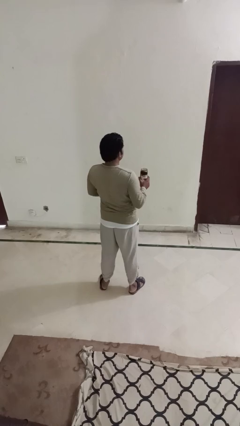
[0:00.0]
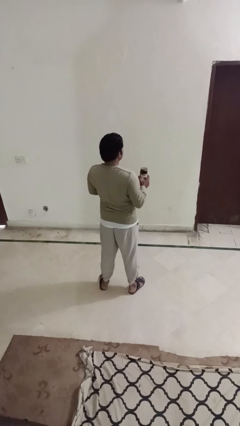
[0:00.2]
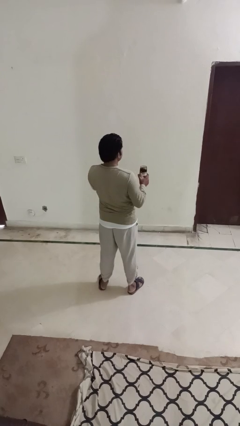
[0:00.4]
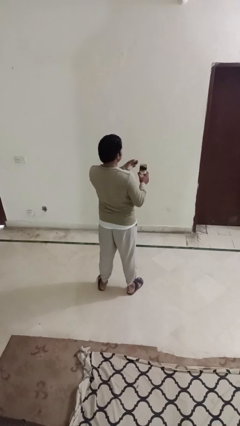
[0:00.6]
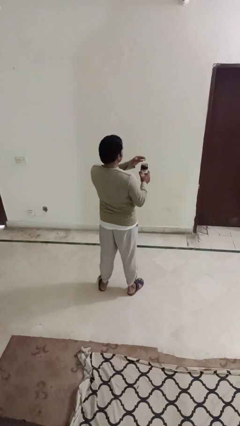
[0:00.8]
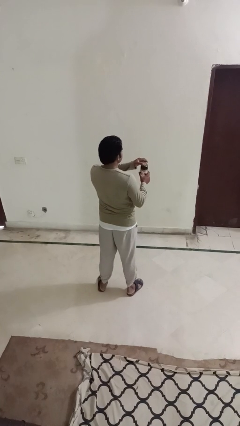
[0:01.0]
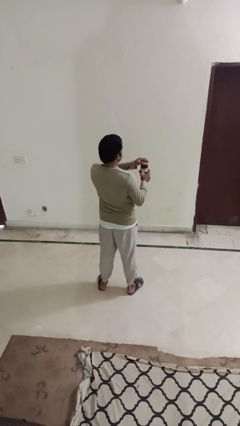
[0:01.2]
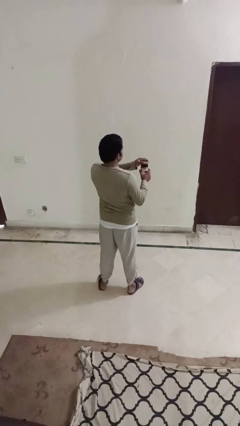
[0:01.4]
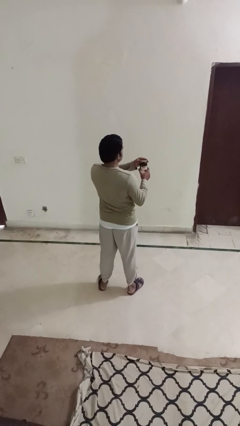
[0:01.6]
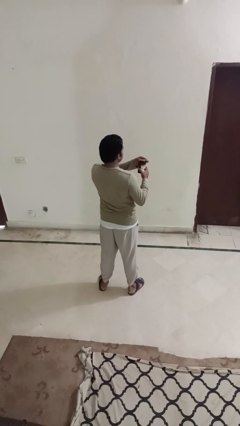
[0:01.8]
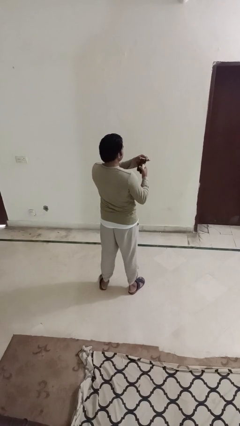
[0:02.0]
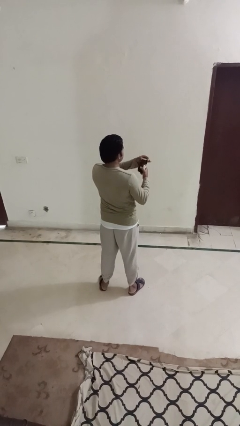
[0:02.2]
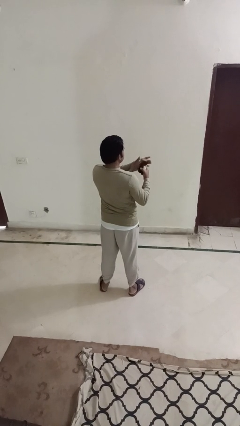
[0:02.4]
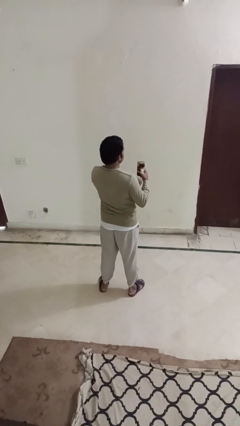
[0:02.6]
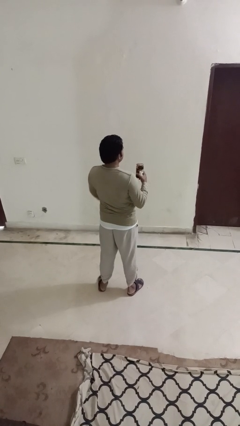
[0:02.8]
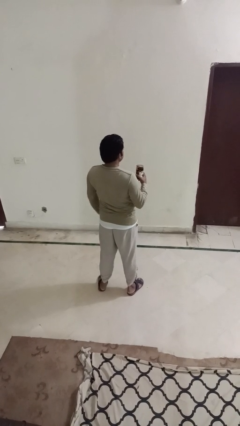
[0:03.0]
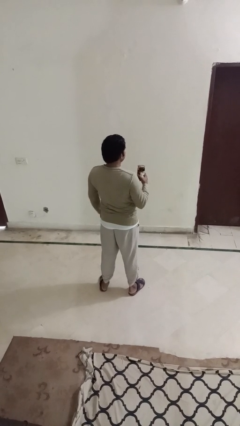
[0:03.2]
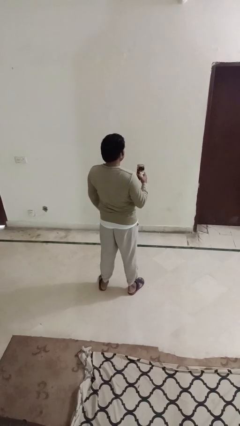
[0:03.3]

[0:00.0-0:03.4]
person closes jar

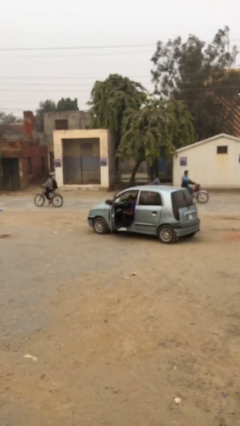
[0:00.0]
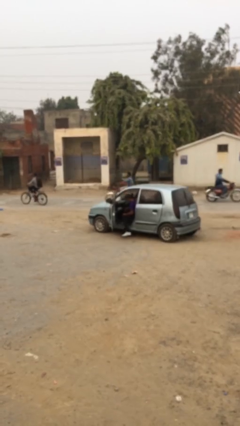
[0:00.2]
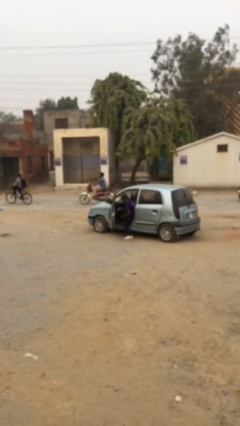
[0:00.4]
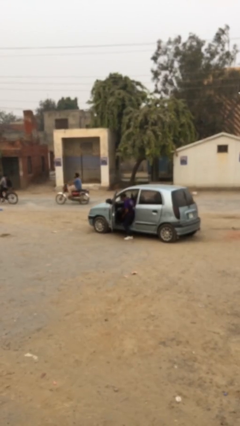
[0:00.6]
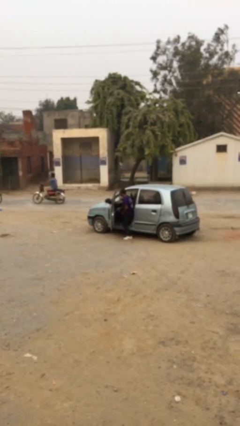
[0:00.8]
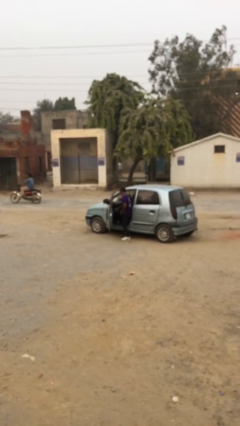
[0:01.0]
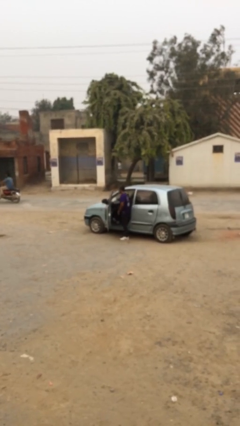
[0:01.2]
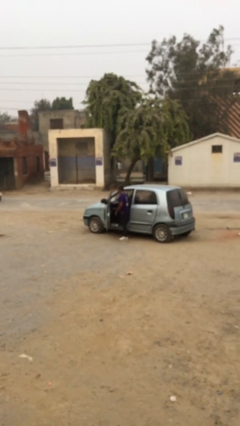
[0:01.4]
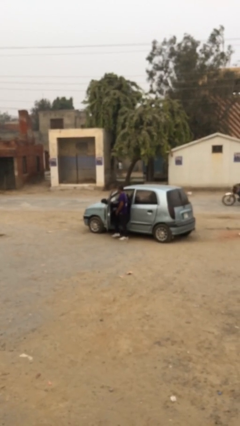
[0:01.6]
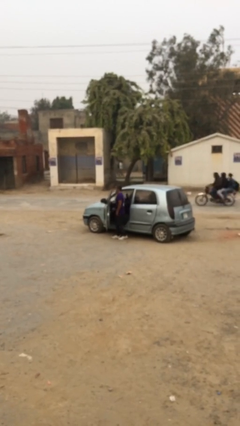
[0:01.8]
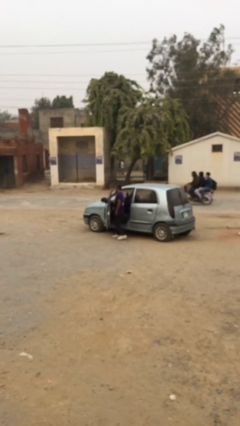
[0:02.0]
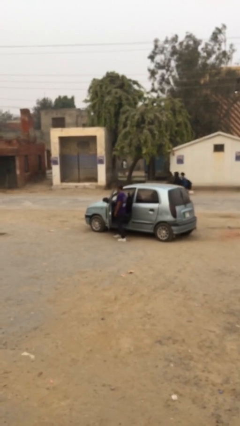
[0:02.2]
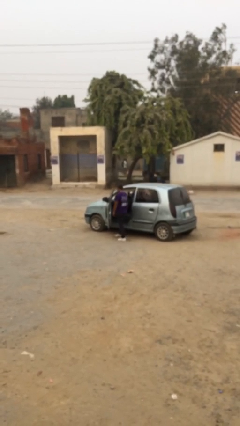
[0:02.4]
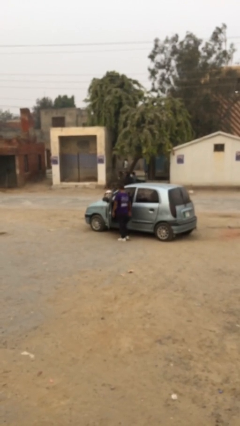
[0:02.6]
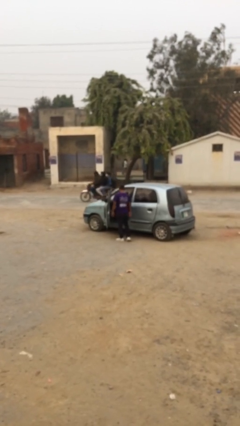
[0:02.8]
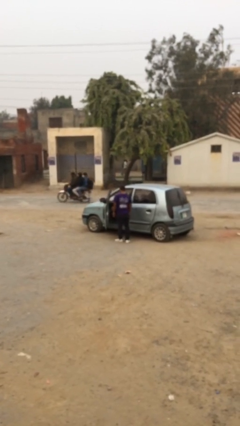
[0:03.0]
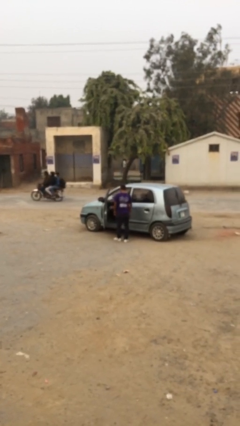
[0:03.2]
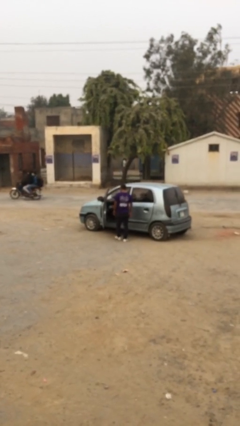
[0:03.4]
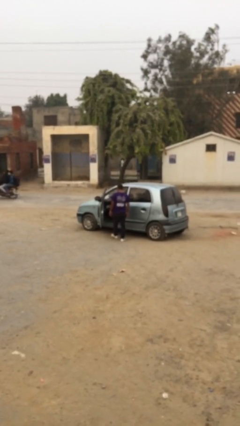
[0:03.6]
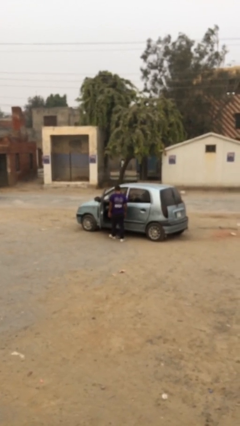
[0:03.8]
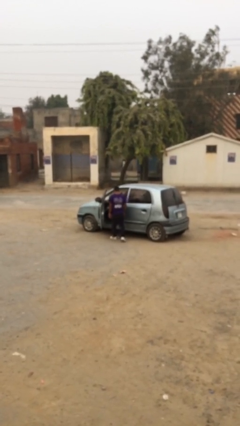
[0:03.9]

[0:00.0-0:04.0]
person exits car

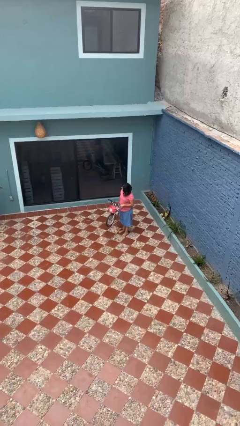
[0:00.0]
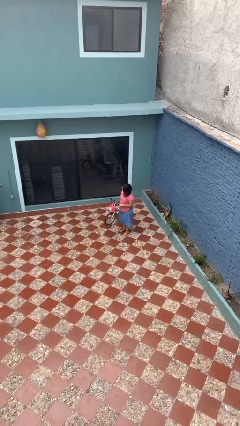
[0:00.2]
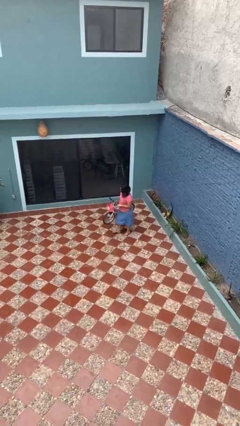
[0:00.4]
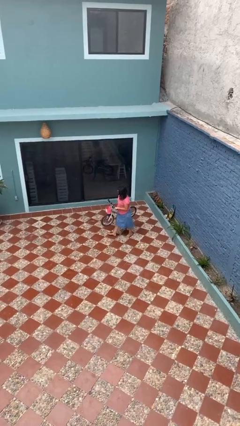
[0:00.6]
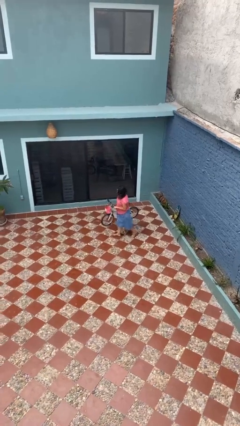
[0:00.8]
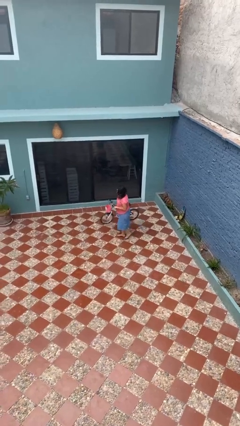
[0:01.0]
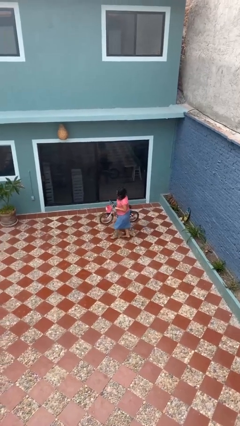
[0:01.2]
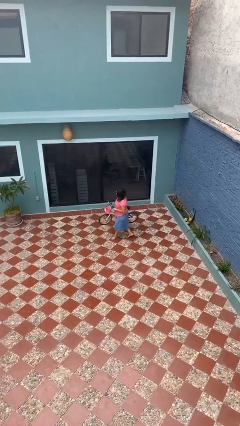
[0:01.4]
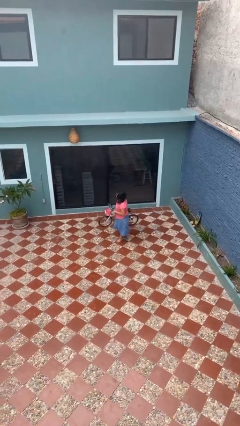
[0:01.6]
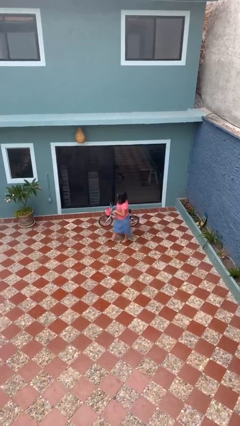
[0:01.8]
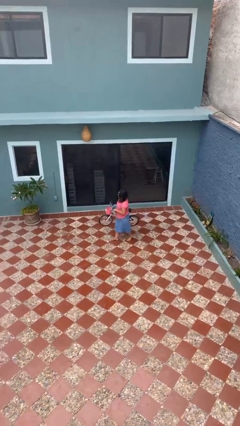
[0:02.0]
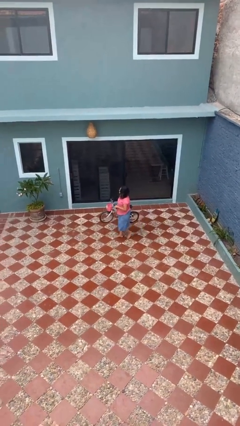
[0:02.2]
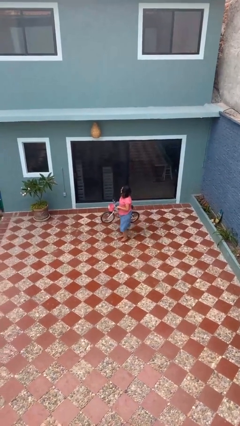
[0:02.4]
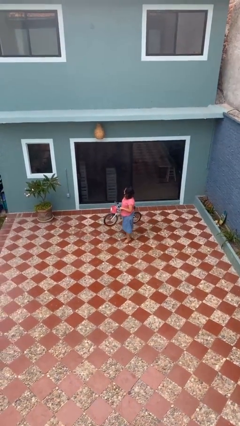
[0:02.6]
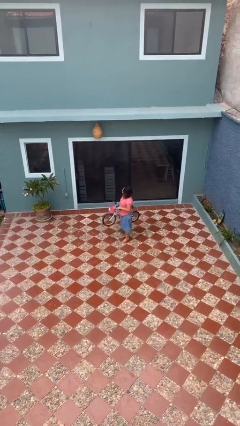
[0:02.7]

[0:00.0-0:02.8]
person carries bicycle

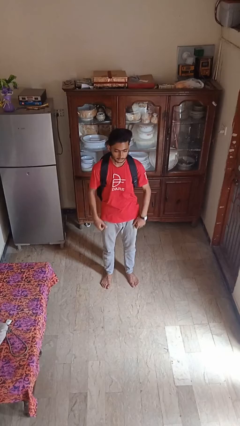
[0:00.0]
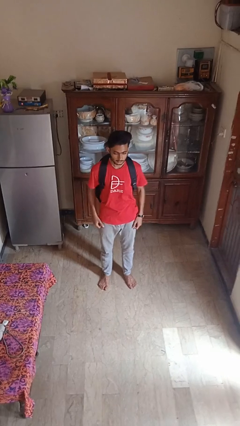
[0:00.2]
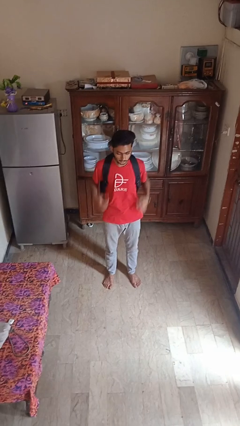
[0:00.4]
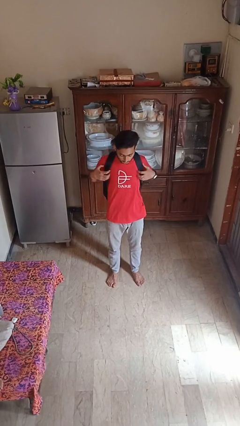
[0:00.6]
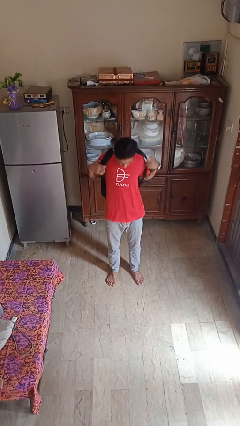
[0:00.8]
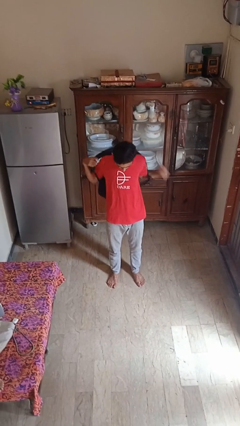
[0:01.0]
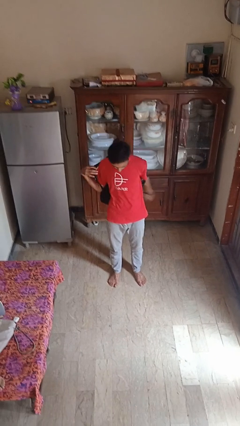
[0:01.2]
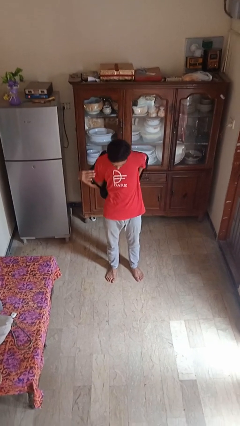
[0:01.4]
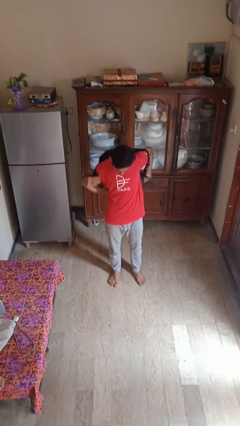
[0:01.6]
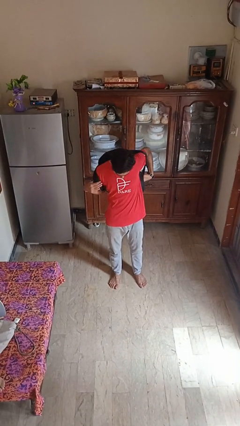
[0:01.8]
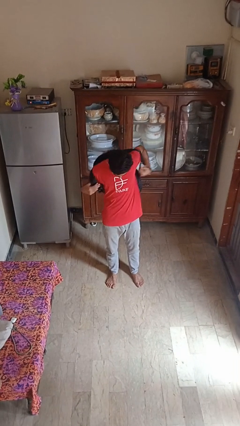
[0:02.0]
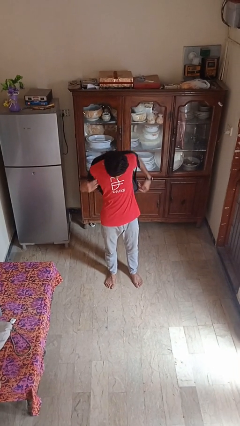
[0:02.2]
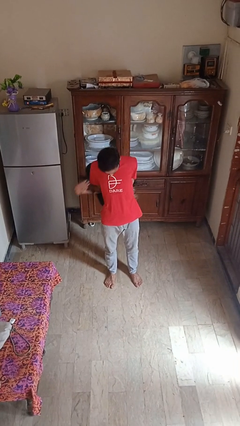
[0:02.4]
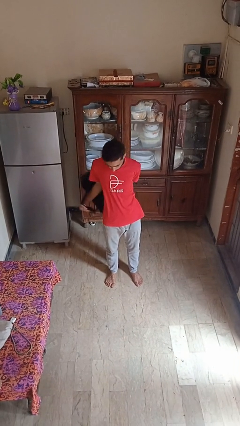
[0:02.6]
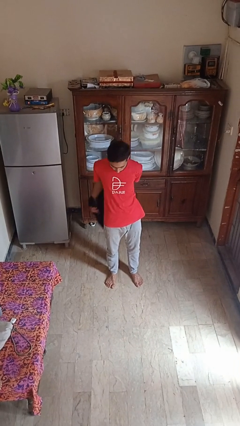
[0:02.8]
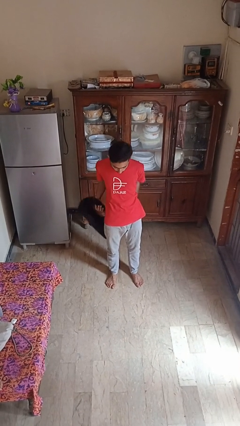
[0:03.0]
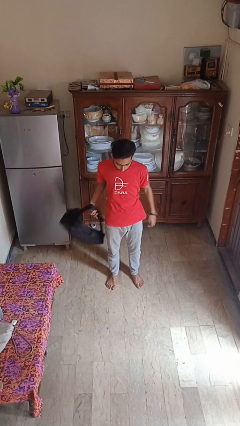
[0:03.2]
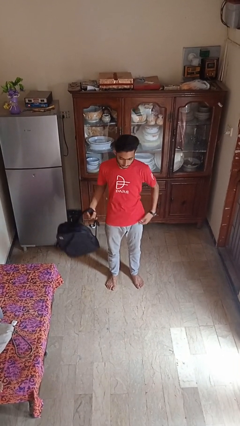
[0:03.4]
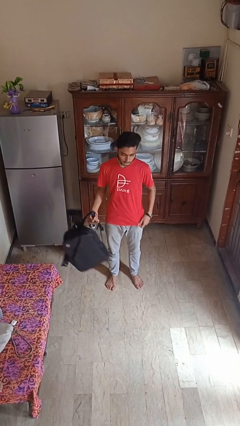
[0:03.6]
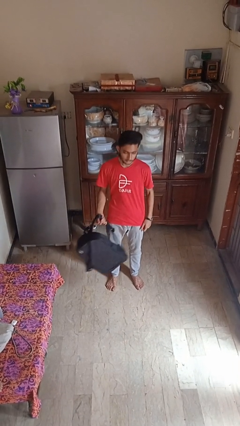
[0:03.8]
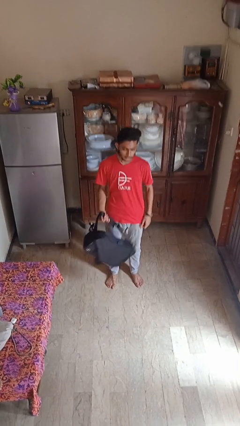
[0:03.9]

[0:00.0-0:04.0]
person takes off backpack

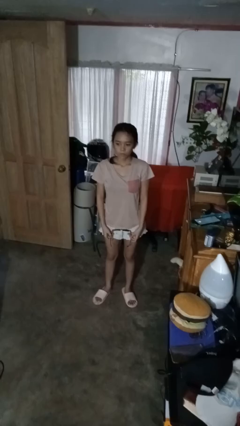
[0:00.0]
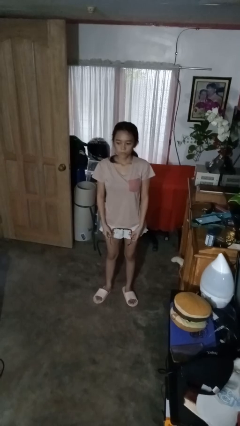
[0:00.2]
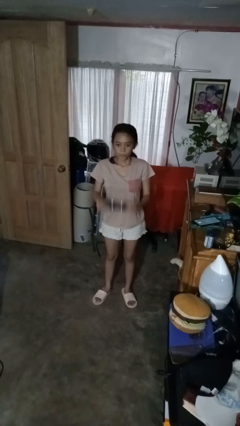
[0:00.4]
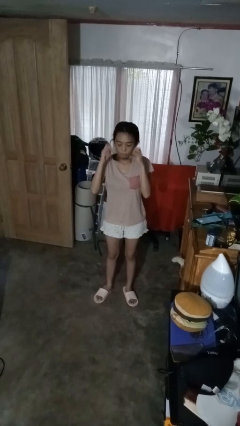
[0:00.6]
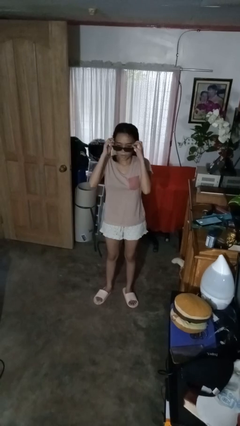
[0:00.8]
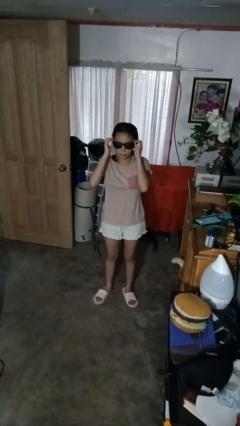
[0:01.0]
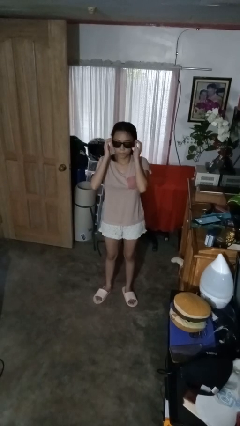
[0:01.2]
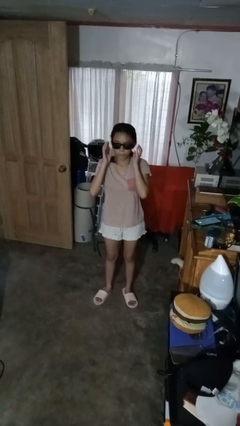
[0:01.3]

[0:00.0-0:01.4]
person puts on sunglasses

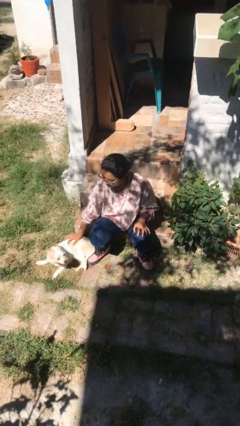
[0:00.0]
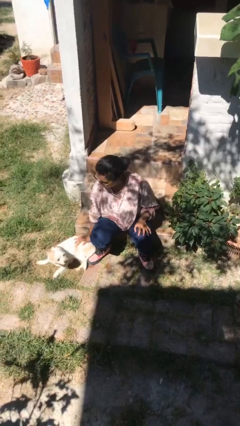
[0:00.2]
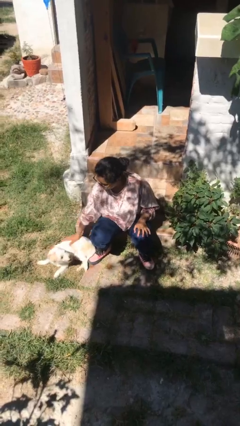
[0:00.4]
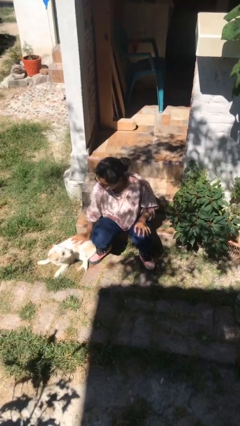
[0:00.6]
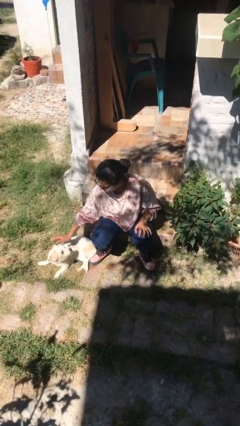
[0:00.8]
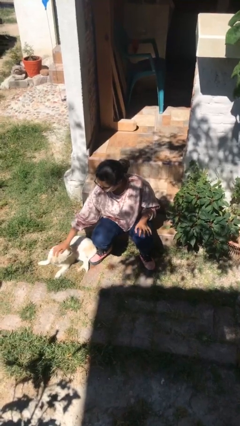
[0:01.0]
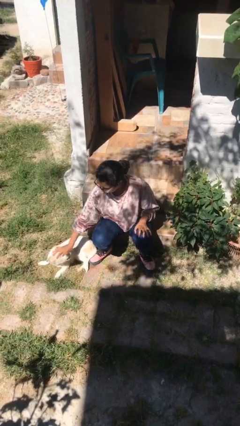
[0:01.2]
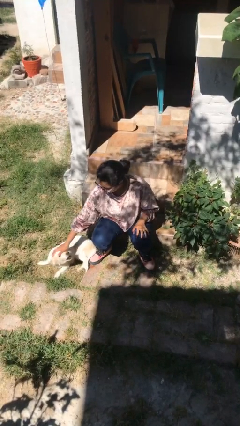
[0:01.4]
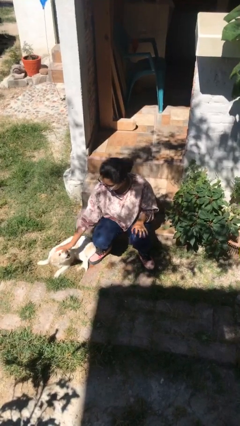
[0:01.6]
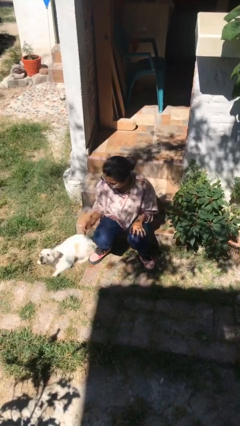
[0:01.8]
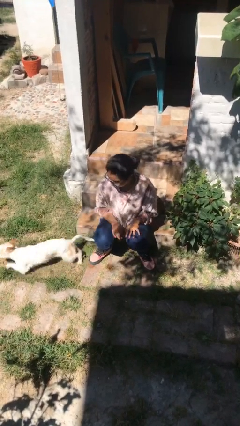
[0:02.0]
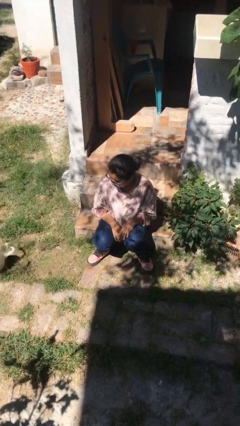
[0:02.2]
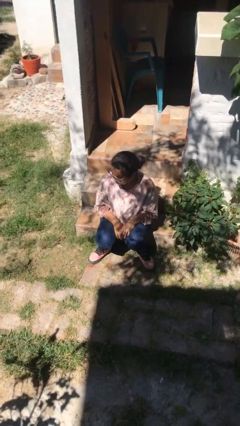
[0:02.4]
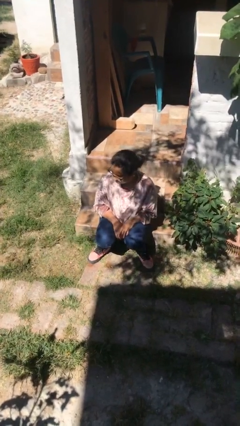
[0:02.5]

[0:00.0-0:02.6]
person pets dog
